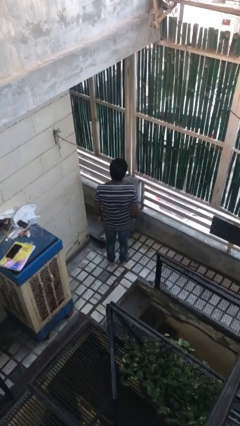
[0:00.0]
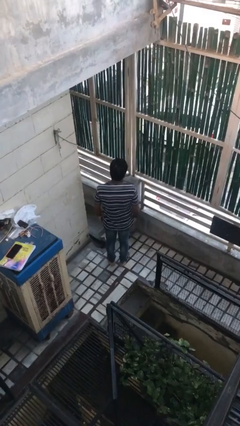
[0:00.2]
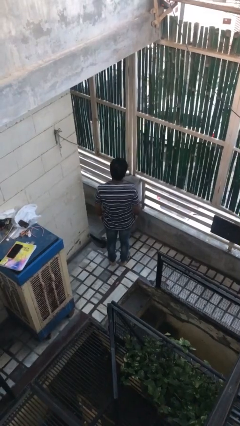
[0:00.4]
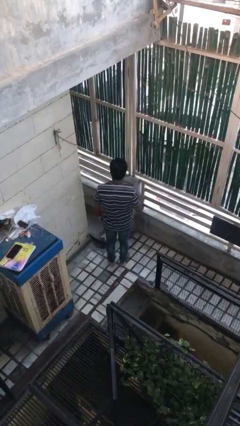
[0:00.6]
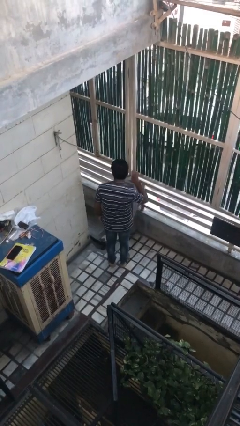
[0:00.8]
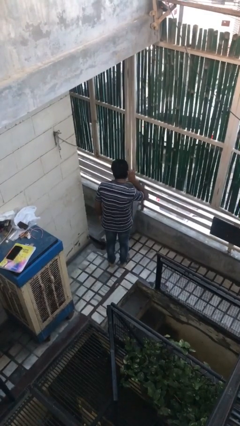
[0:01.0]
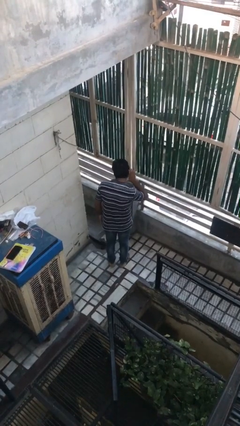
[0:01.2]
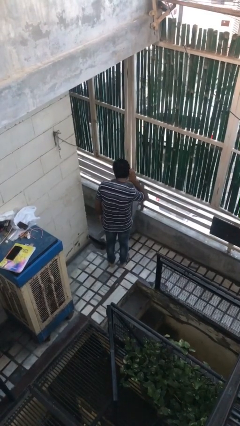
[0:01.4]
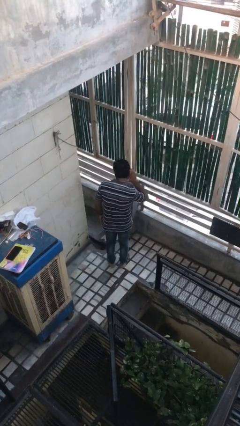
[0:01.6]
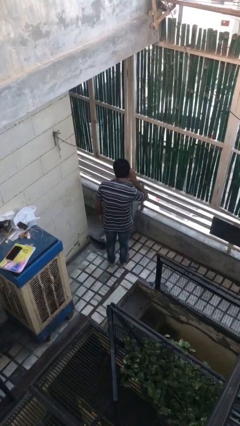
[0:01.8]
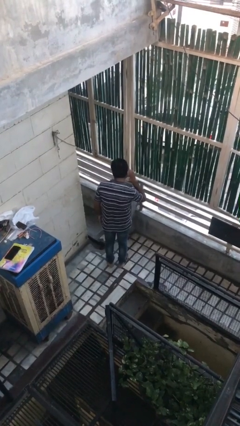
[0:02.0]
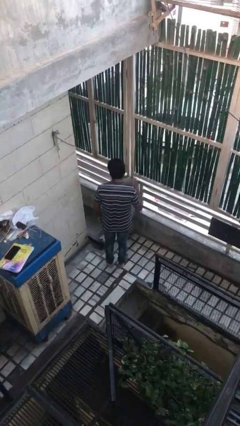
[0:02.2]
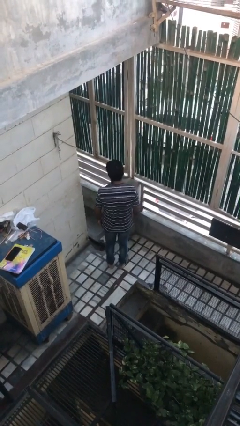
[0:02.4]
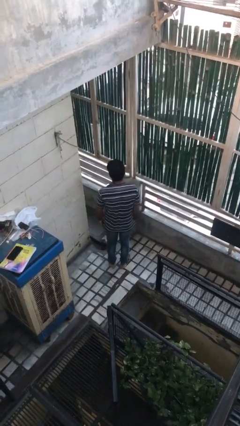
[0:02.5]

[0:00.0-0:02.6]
person gestures listen closely

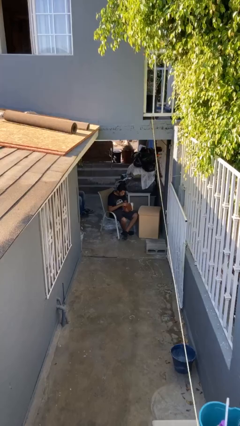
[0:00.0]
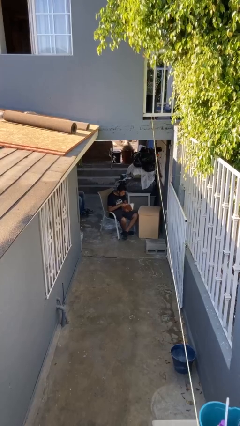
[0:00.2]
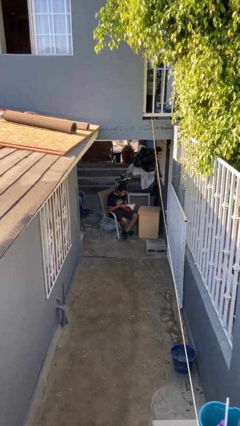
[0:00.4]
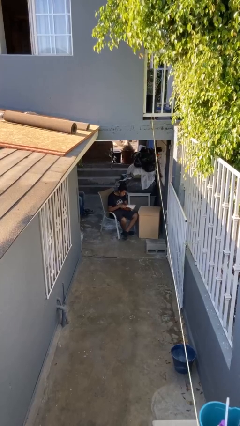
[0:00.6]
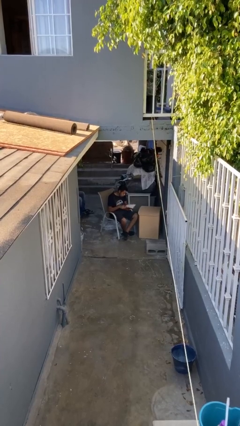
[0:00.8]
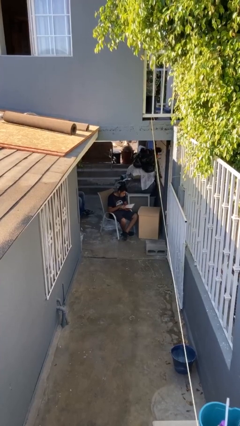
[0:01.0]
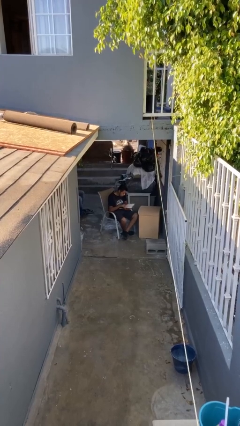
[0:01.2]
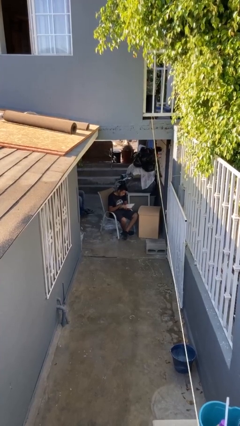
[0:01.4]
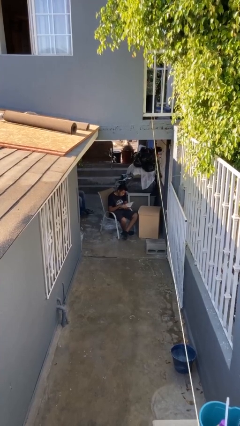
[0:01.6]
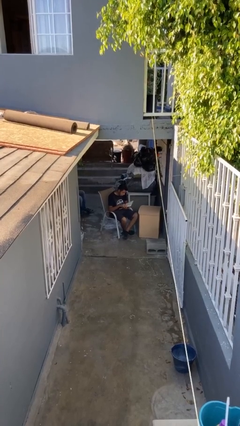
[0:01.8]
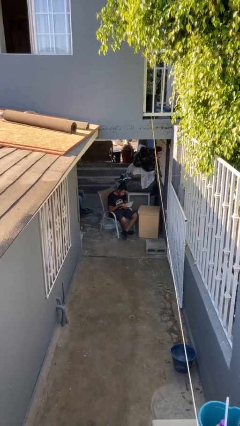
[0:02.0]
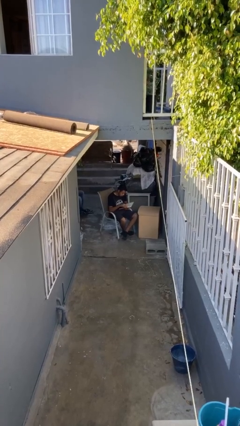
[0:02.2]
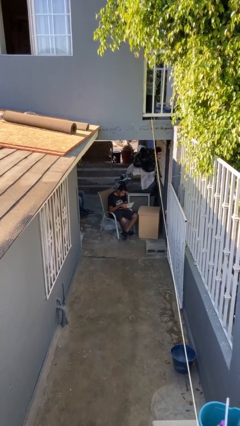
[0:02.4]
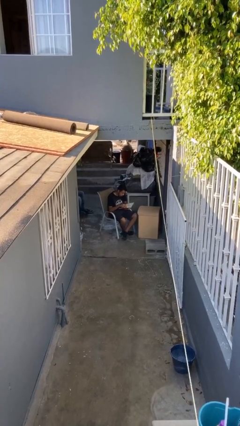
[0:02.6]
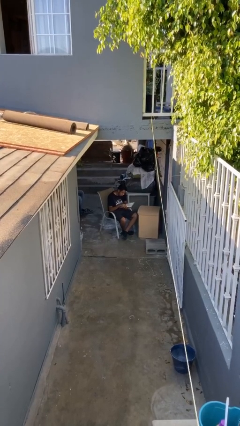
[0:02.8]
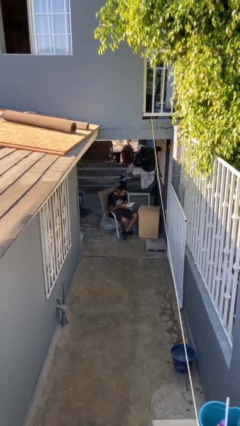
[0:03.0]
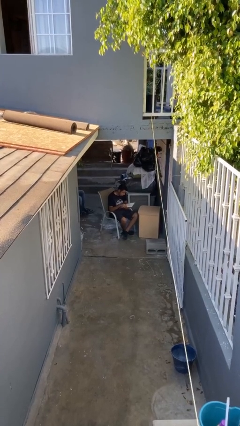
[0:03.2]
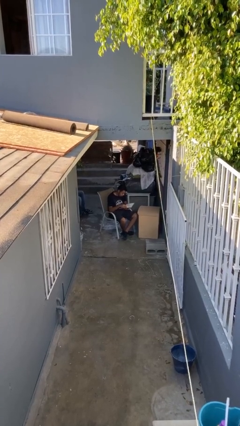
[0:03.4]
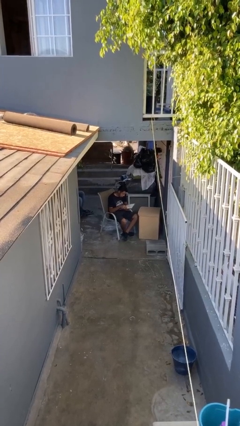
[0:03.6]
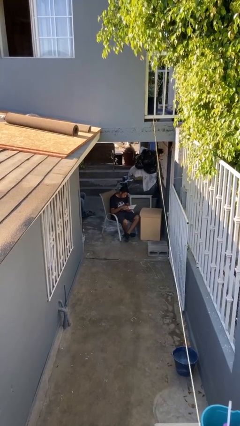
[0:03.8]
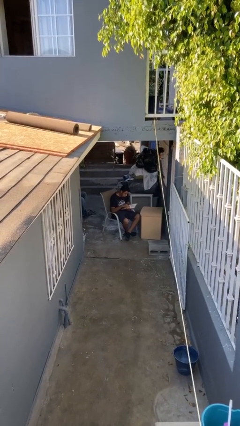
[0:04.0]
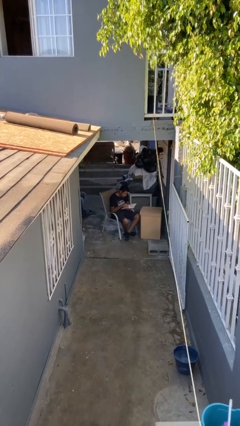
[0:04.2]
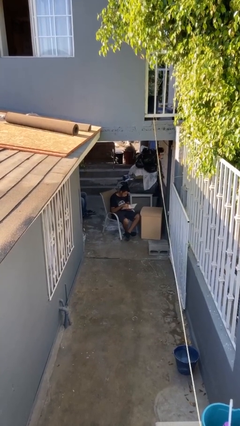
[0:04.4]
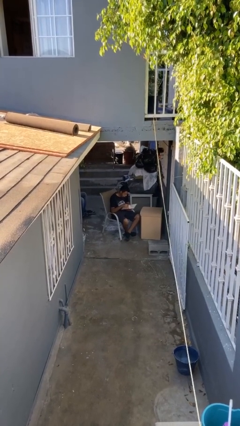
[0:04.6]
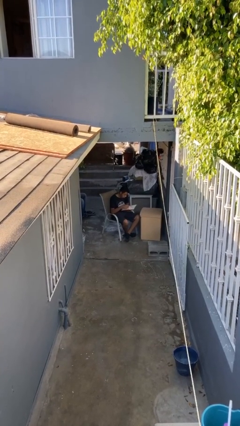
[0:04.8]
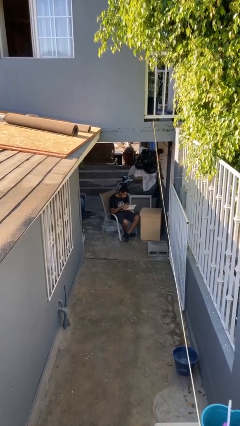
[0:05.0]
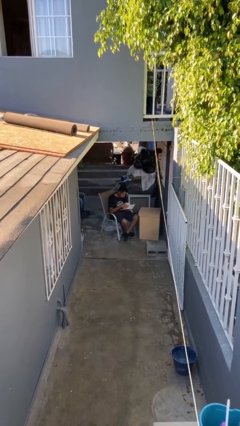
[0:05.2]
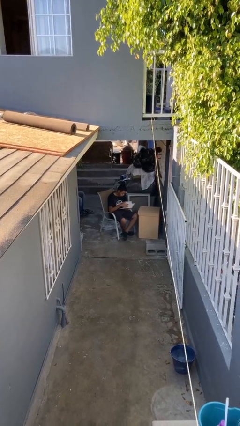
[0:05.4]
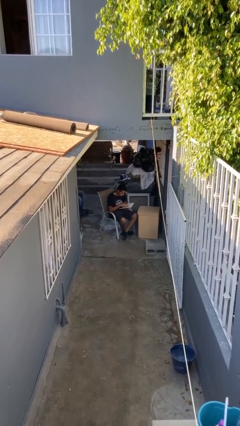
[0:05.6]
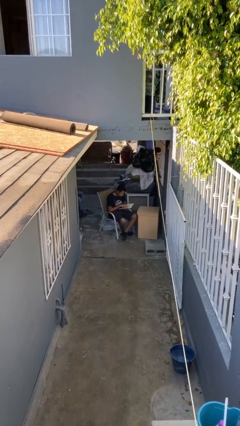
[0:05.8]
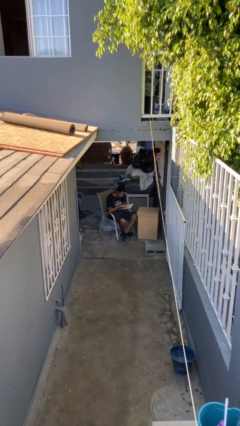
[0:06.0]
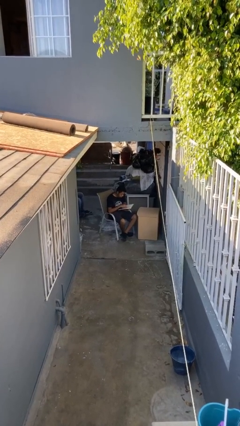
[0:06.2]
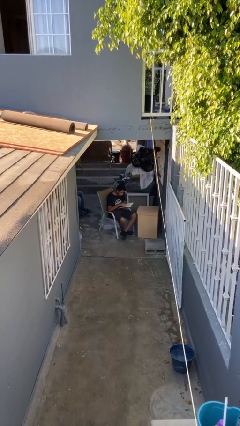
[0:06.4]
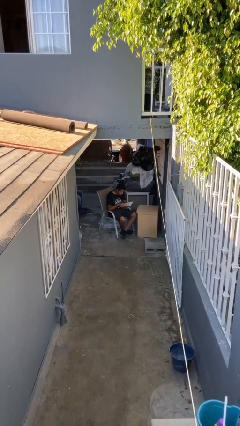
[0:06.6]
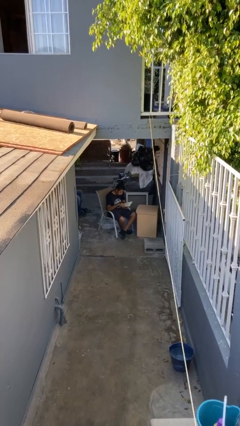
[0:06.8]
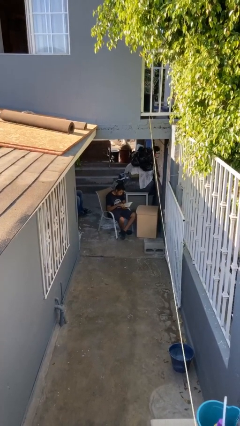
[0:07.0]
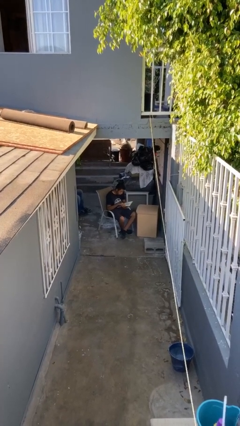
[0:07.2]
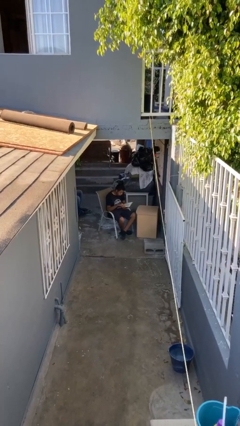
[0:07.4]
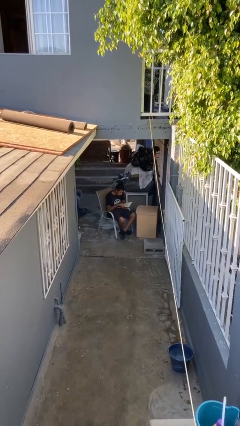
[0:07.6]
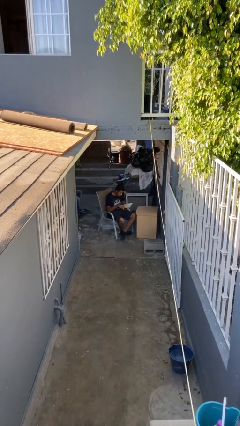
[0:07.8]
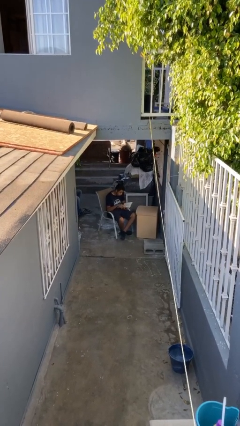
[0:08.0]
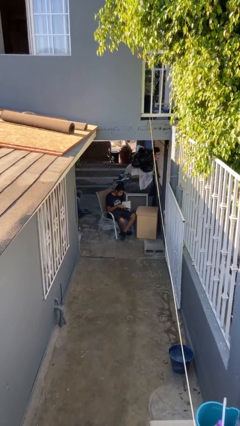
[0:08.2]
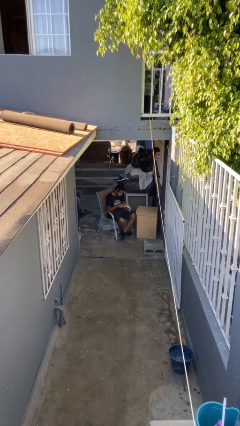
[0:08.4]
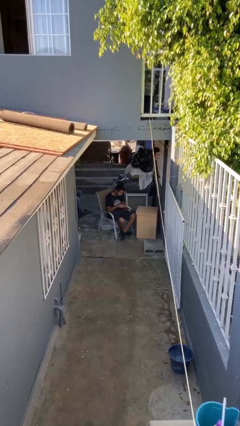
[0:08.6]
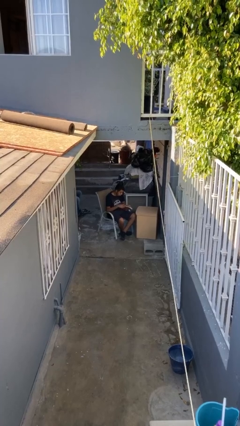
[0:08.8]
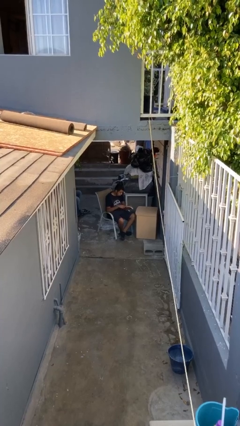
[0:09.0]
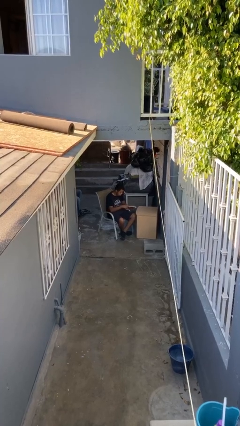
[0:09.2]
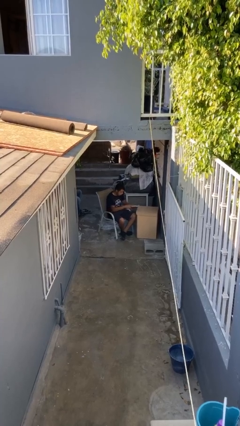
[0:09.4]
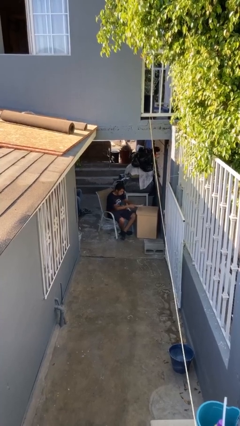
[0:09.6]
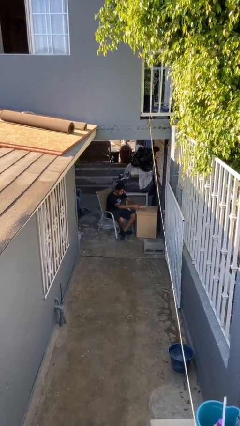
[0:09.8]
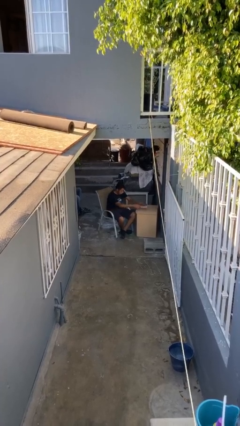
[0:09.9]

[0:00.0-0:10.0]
person reads document

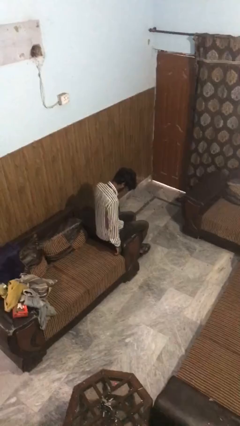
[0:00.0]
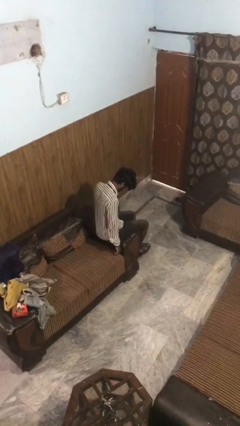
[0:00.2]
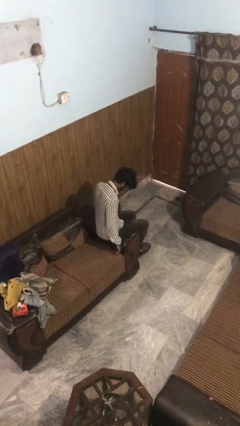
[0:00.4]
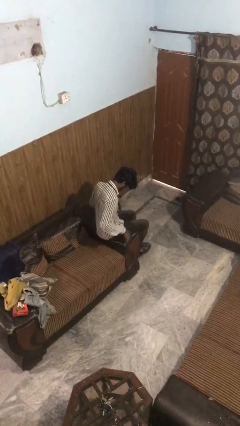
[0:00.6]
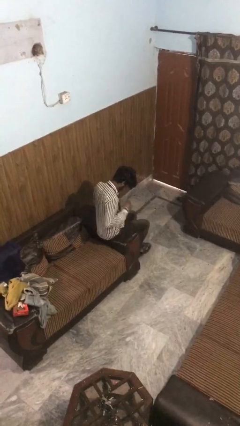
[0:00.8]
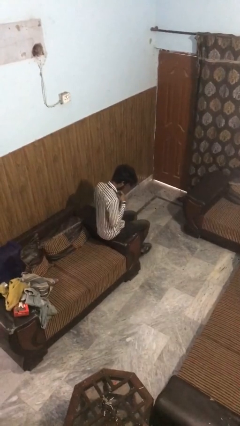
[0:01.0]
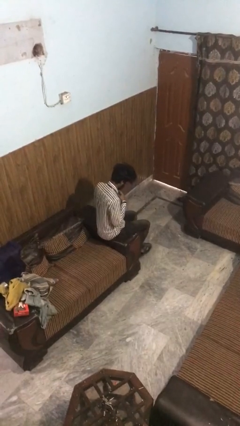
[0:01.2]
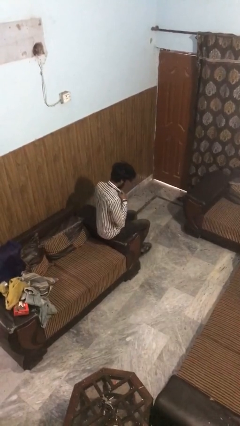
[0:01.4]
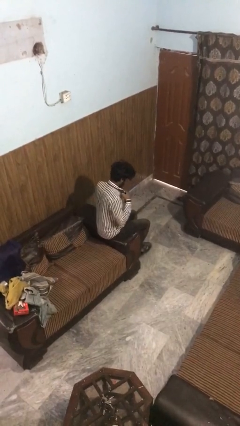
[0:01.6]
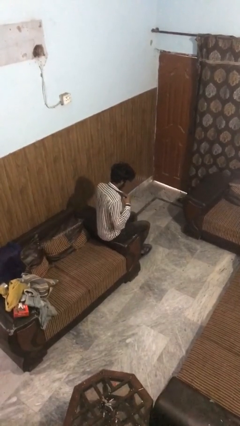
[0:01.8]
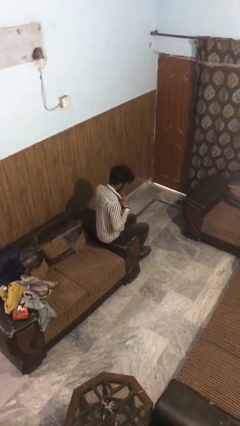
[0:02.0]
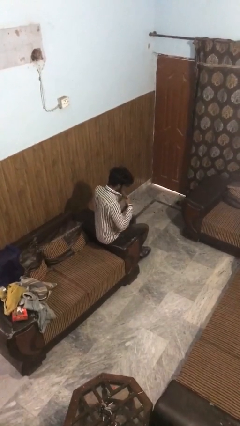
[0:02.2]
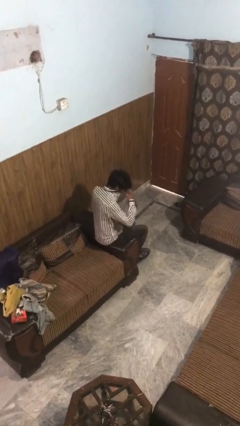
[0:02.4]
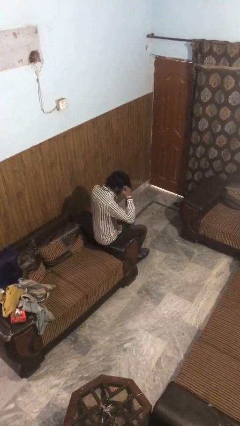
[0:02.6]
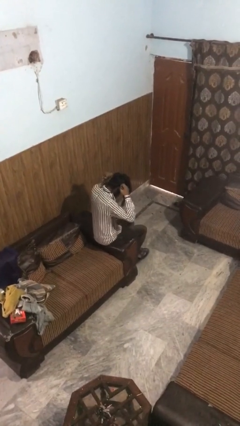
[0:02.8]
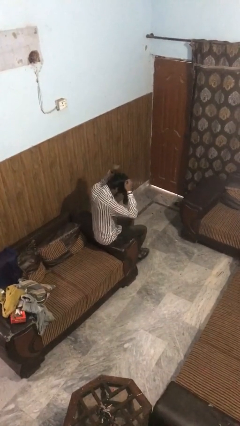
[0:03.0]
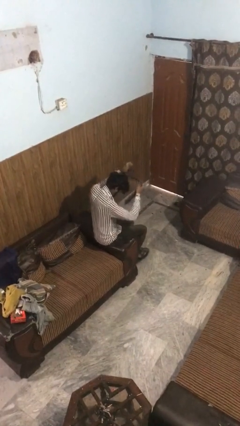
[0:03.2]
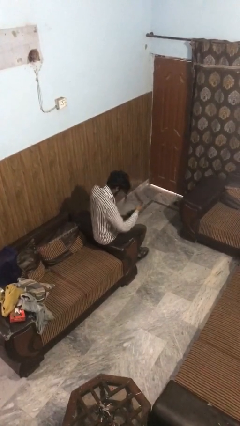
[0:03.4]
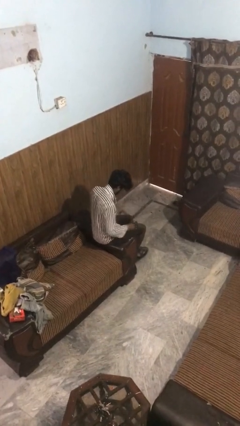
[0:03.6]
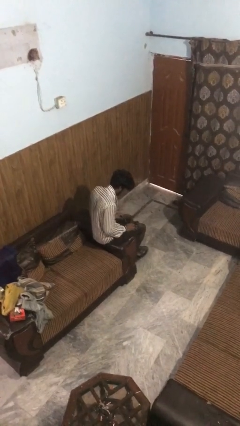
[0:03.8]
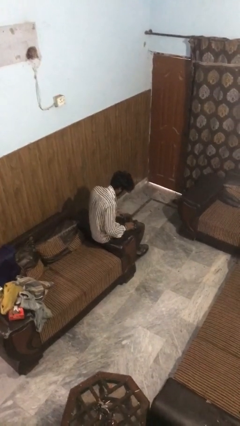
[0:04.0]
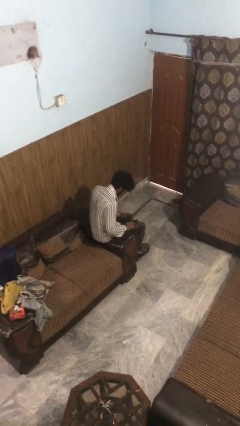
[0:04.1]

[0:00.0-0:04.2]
person takes off necktie

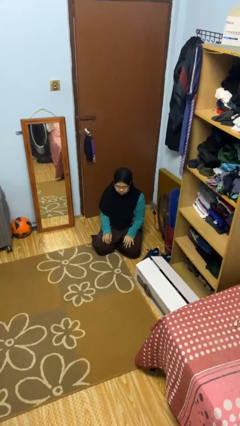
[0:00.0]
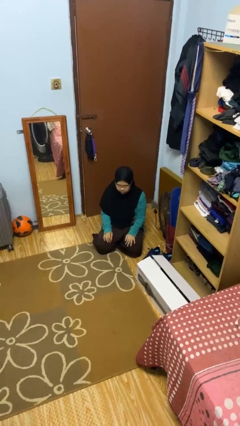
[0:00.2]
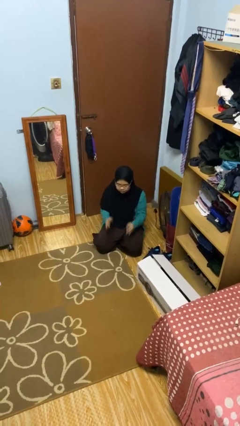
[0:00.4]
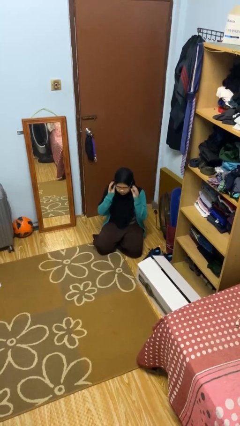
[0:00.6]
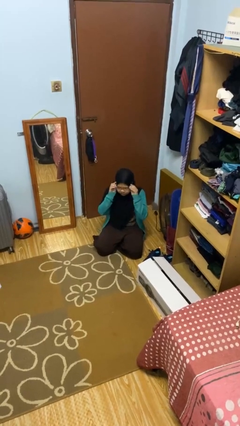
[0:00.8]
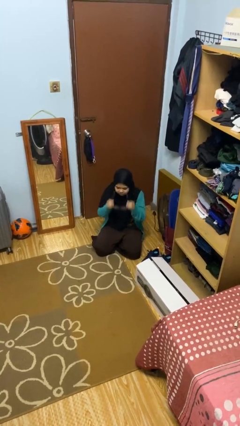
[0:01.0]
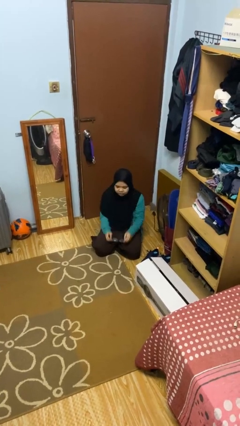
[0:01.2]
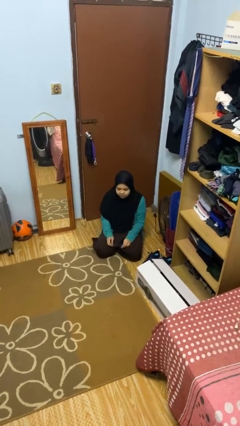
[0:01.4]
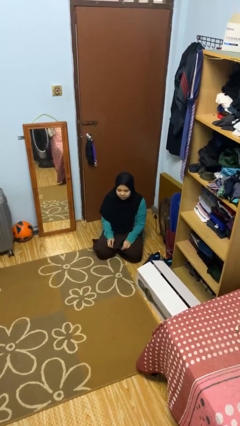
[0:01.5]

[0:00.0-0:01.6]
person takes off glasses
